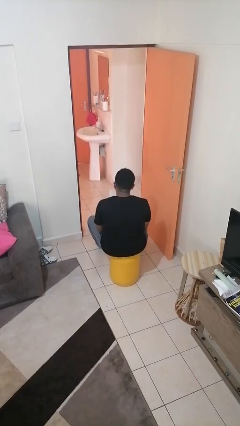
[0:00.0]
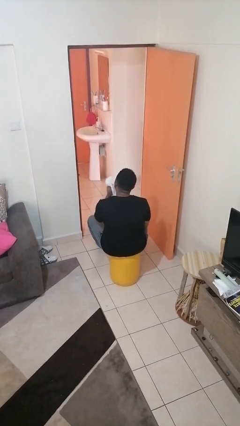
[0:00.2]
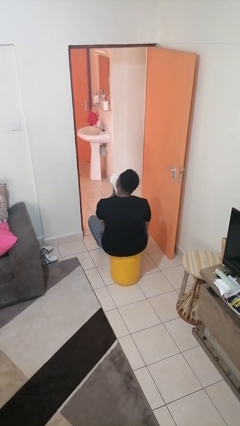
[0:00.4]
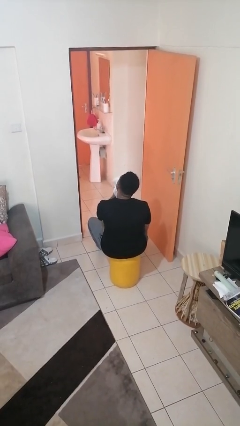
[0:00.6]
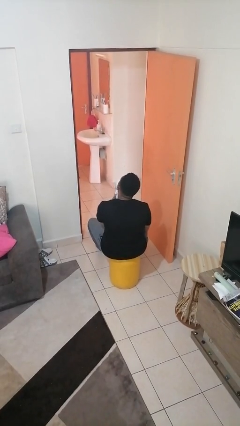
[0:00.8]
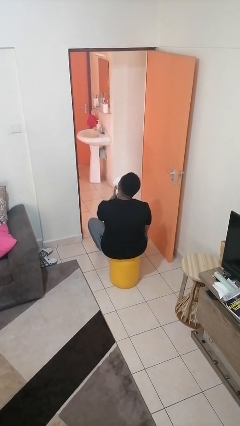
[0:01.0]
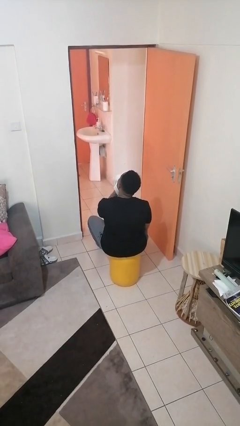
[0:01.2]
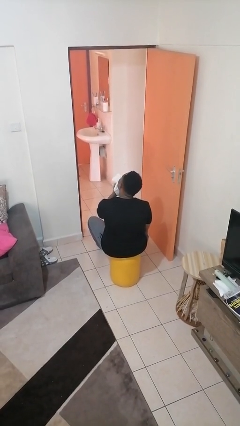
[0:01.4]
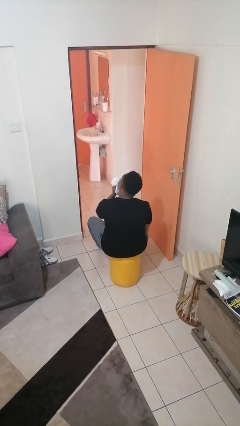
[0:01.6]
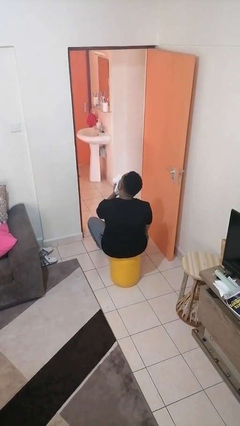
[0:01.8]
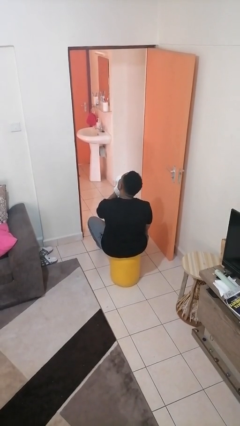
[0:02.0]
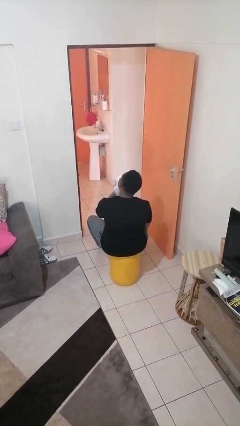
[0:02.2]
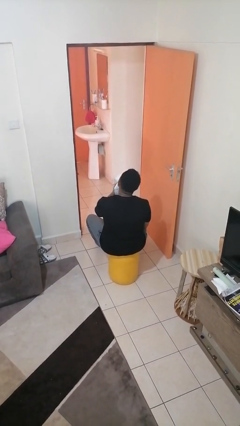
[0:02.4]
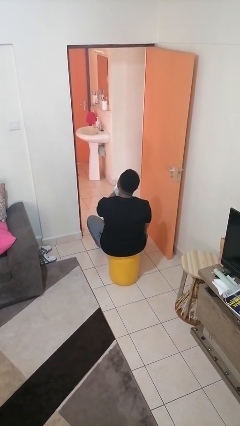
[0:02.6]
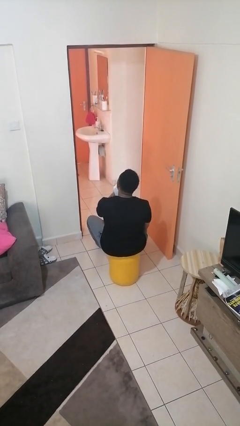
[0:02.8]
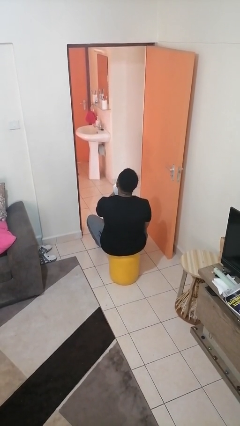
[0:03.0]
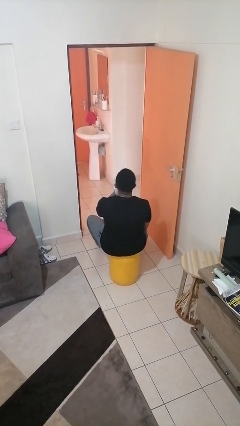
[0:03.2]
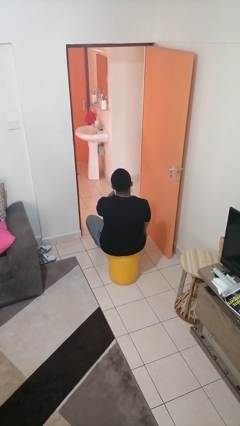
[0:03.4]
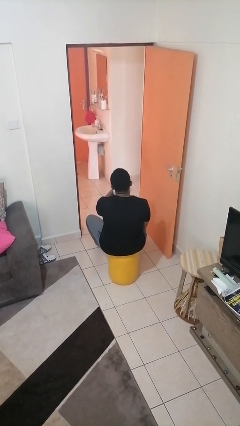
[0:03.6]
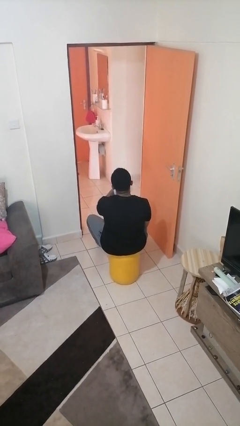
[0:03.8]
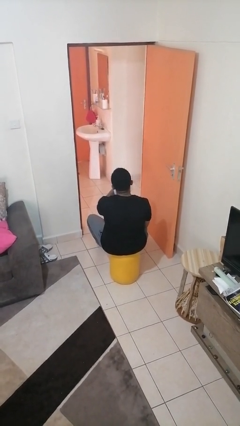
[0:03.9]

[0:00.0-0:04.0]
person wipes mouth with napkin

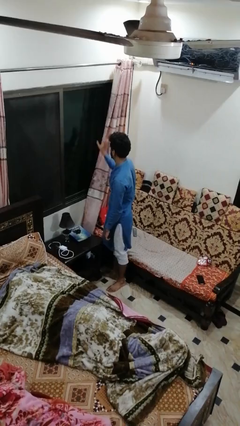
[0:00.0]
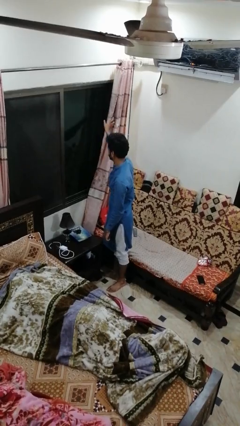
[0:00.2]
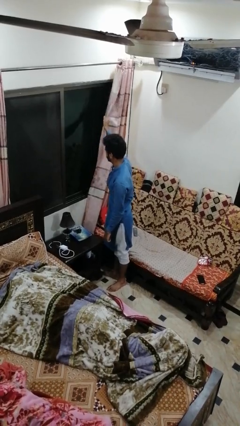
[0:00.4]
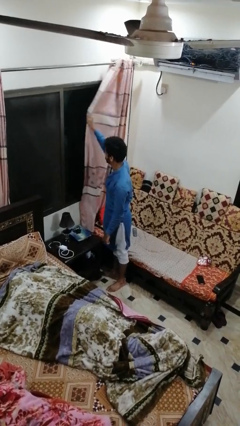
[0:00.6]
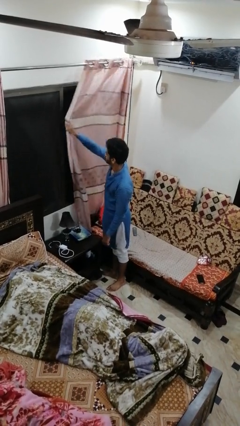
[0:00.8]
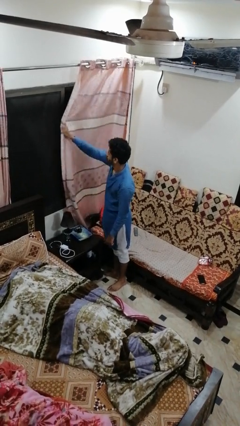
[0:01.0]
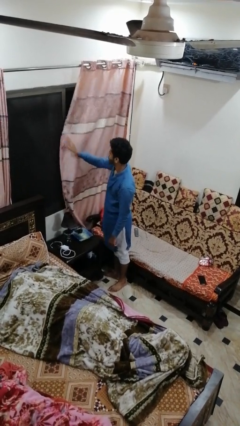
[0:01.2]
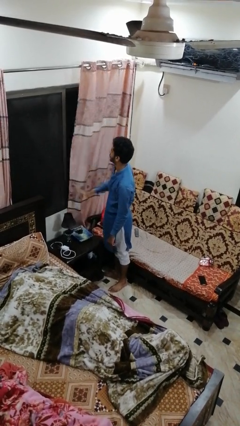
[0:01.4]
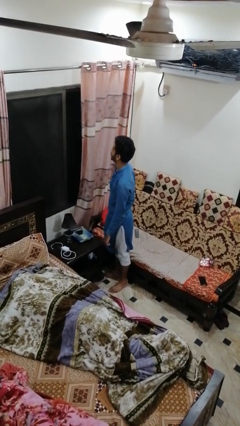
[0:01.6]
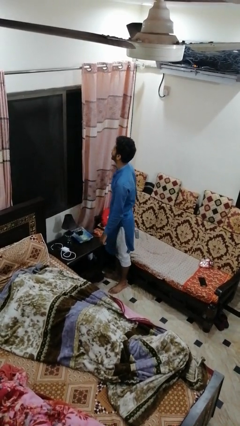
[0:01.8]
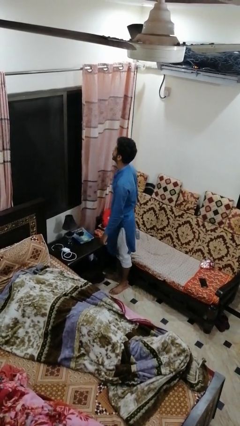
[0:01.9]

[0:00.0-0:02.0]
person closes curtains

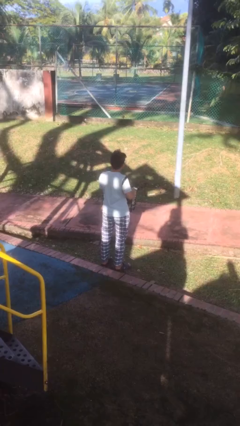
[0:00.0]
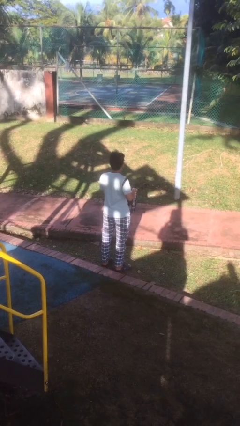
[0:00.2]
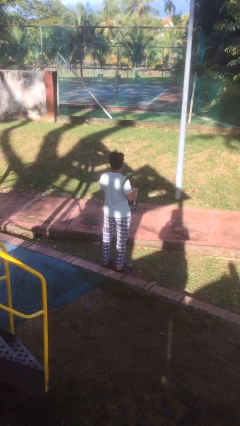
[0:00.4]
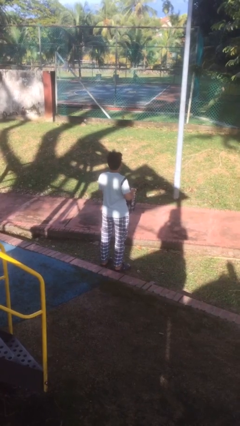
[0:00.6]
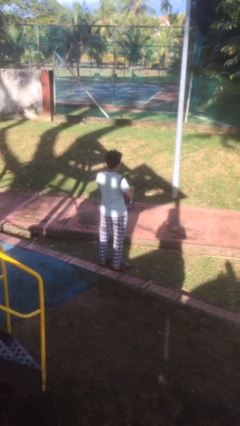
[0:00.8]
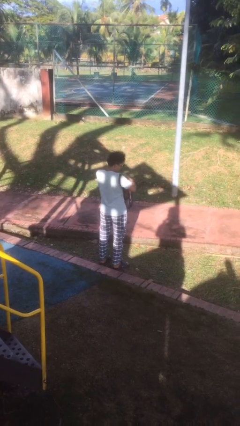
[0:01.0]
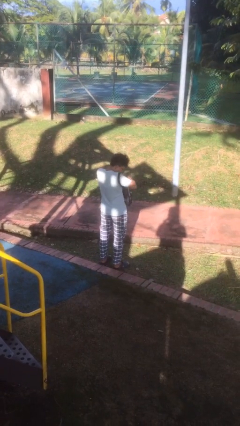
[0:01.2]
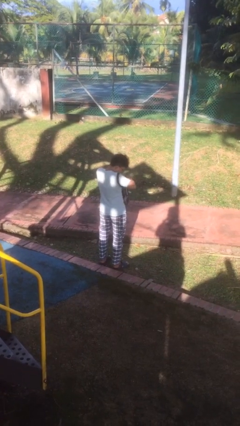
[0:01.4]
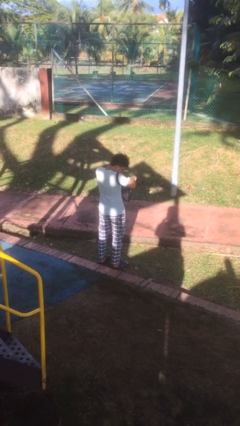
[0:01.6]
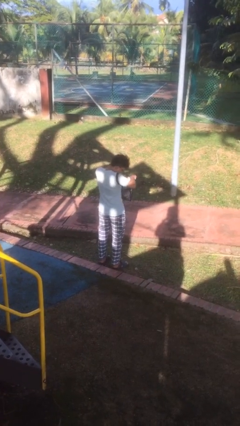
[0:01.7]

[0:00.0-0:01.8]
person searches in bag

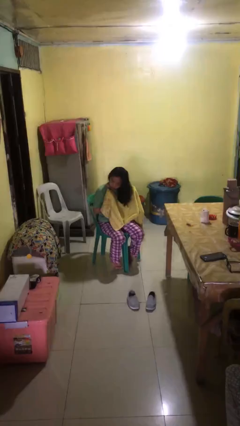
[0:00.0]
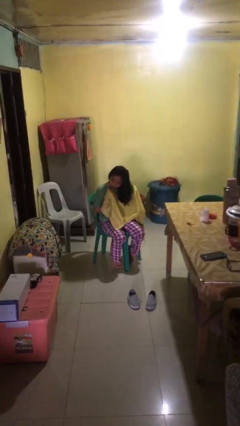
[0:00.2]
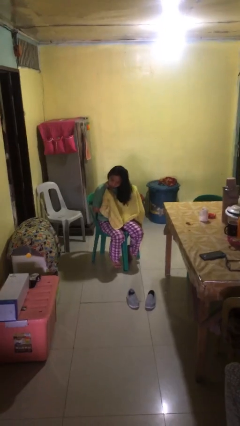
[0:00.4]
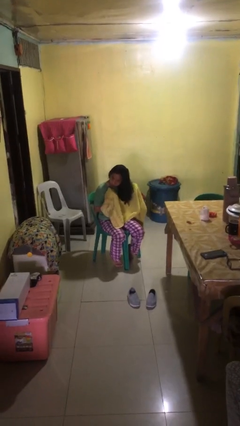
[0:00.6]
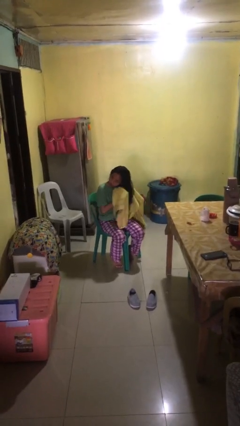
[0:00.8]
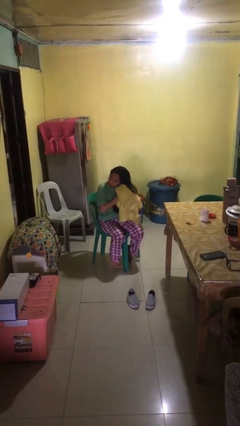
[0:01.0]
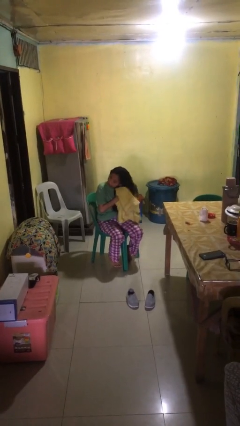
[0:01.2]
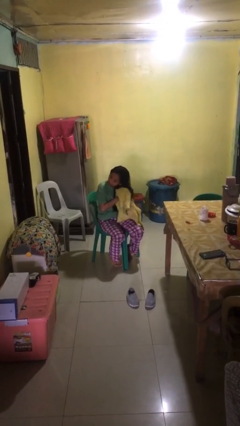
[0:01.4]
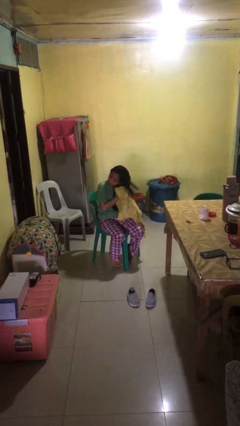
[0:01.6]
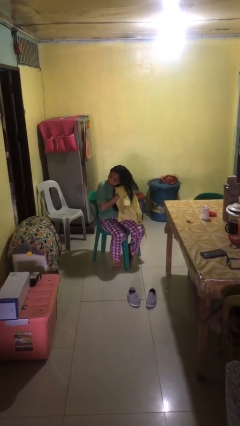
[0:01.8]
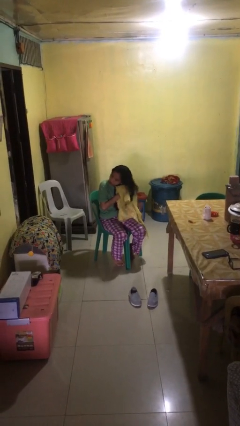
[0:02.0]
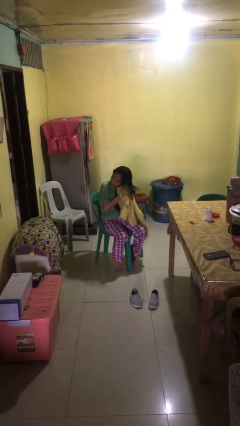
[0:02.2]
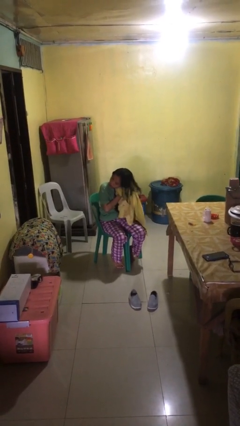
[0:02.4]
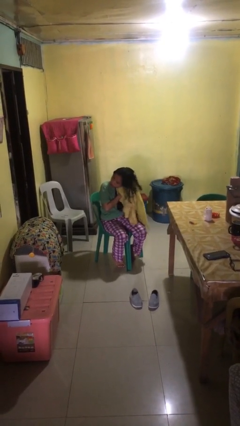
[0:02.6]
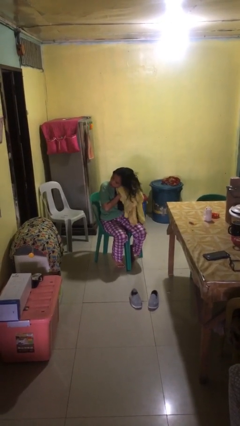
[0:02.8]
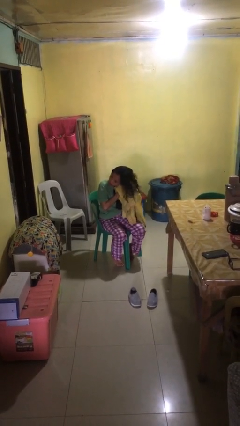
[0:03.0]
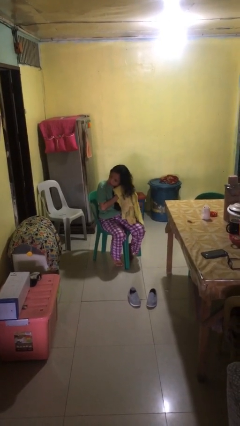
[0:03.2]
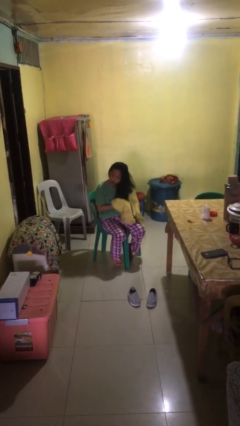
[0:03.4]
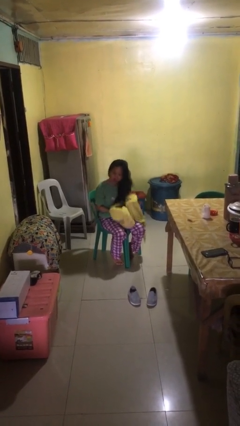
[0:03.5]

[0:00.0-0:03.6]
person dries hair with towel

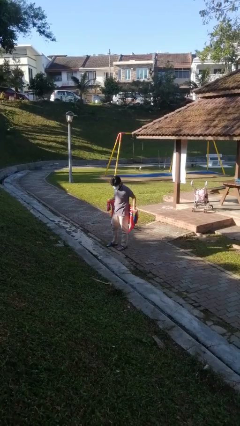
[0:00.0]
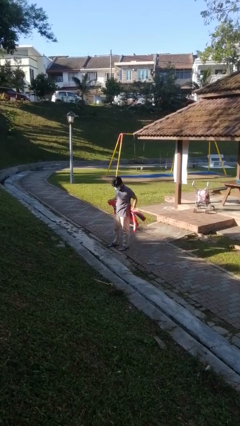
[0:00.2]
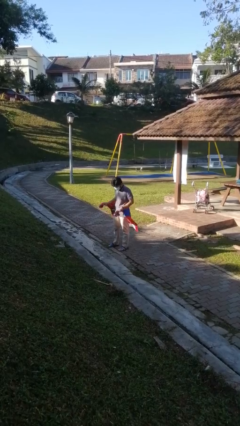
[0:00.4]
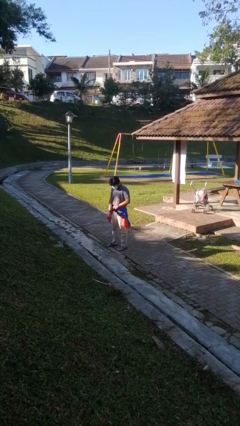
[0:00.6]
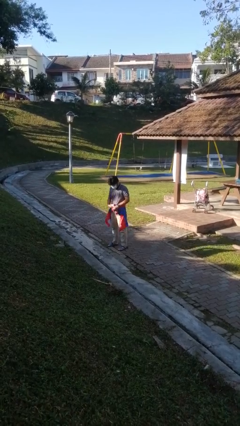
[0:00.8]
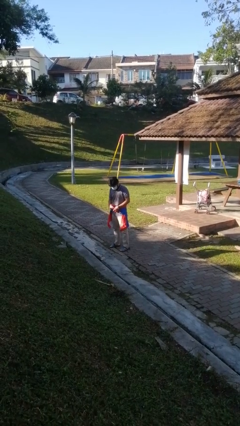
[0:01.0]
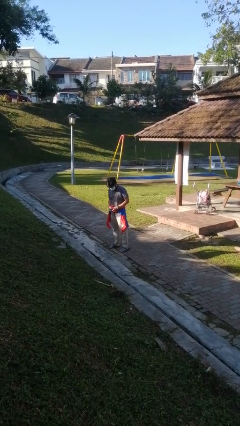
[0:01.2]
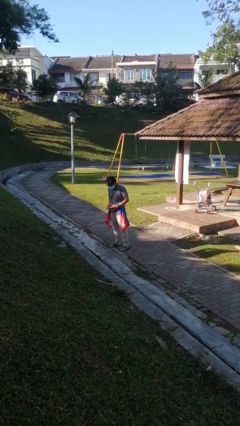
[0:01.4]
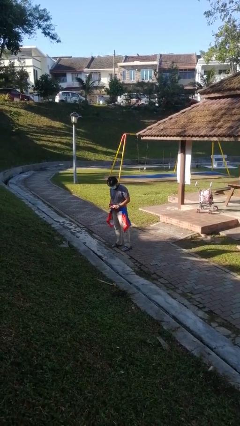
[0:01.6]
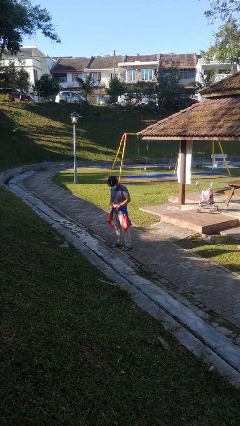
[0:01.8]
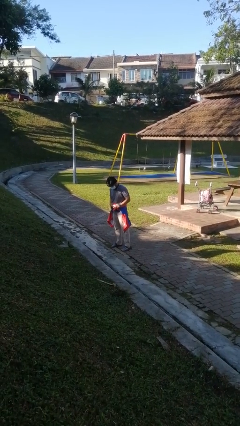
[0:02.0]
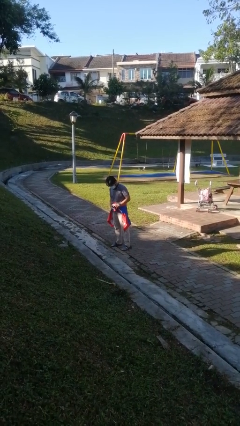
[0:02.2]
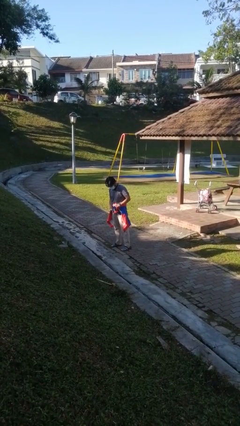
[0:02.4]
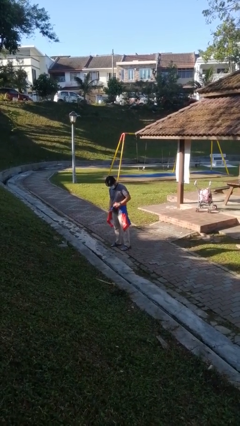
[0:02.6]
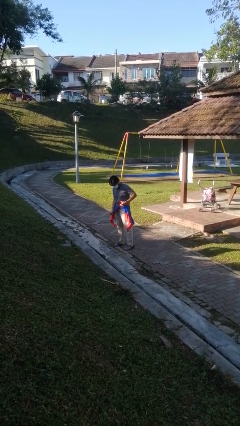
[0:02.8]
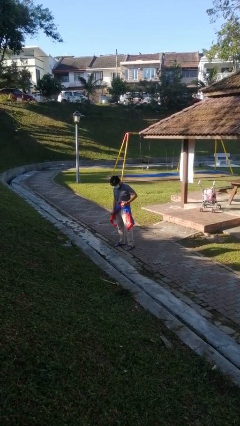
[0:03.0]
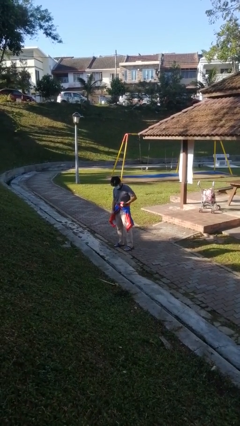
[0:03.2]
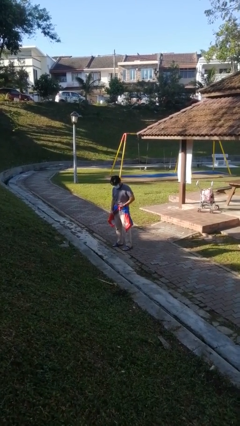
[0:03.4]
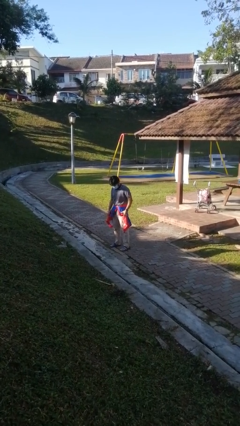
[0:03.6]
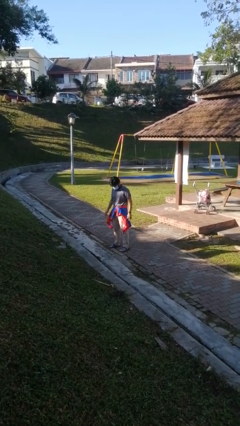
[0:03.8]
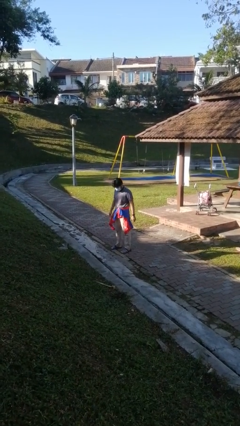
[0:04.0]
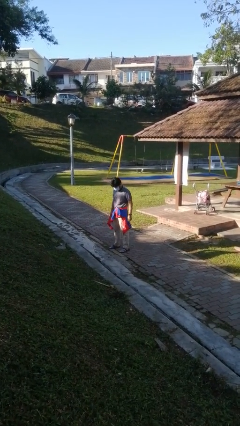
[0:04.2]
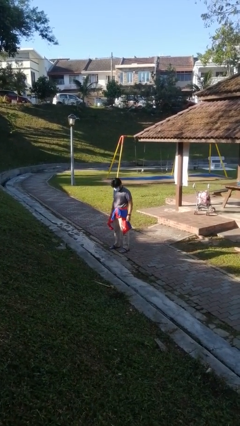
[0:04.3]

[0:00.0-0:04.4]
person ties jacket around waist

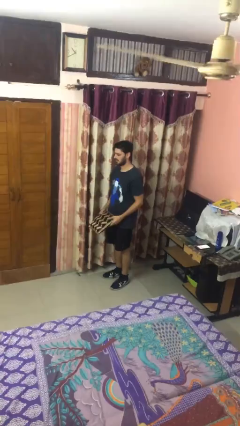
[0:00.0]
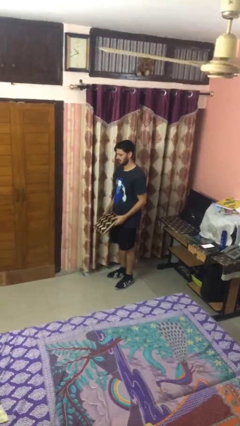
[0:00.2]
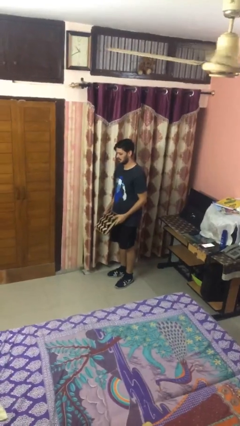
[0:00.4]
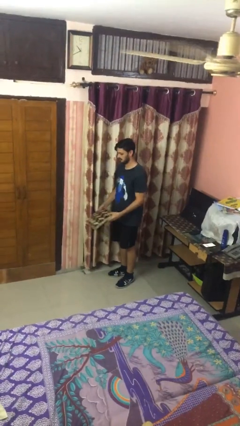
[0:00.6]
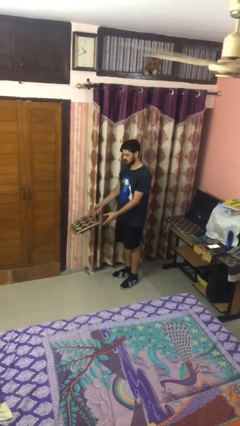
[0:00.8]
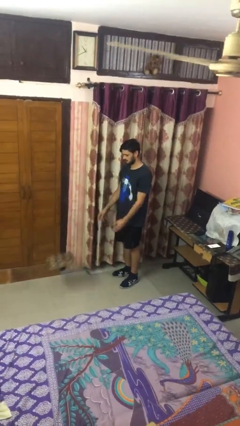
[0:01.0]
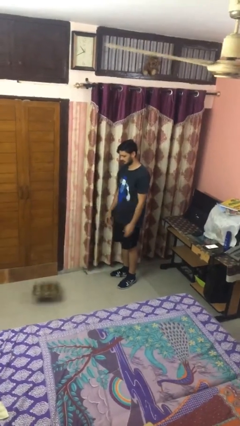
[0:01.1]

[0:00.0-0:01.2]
person throws object to ground

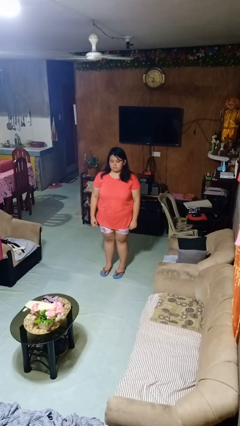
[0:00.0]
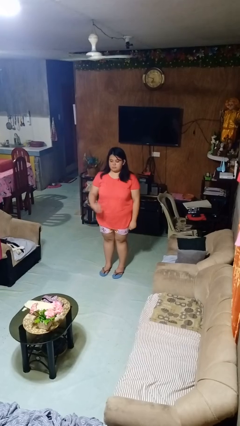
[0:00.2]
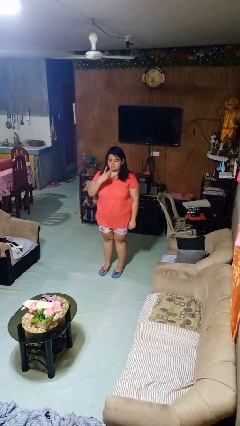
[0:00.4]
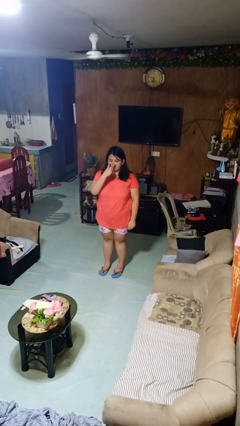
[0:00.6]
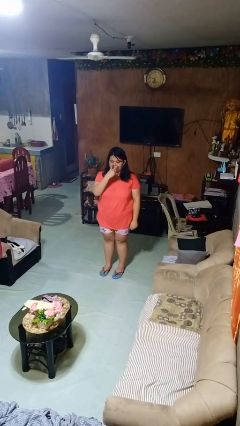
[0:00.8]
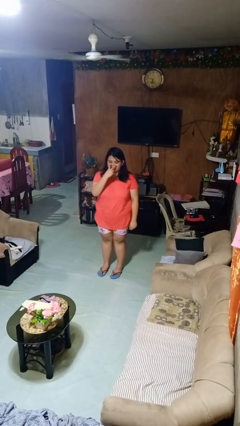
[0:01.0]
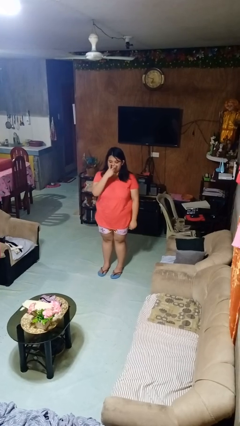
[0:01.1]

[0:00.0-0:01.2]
person gestures watch closely
